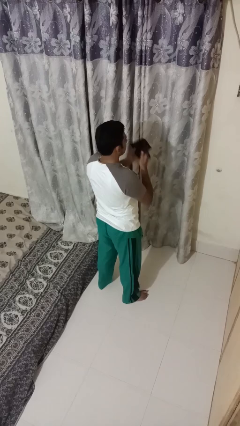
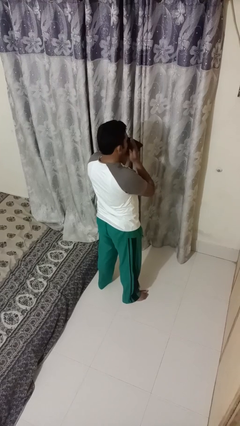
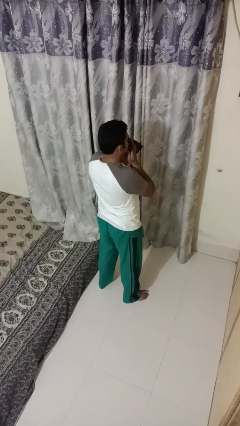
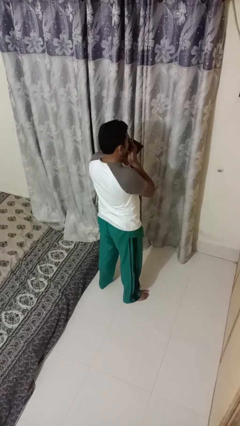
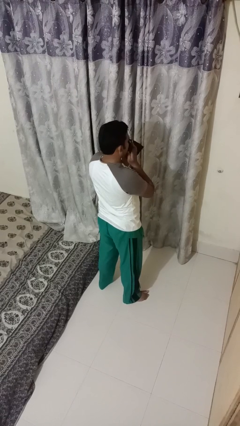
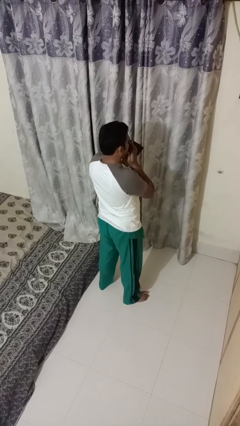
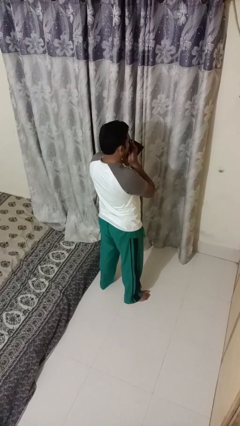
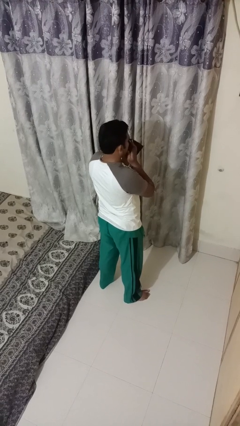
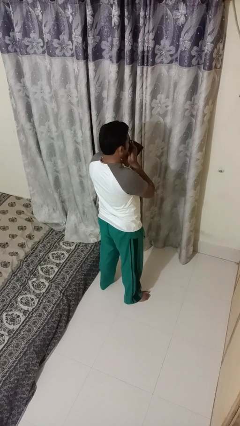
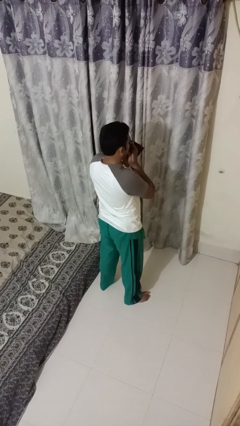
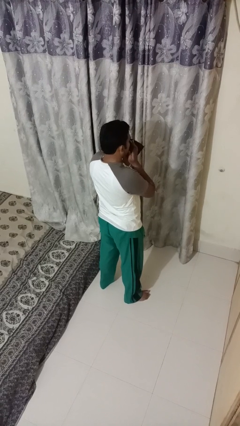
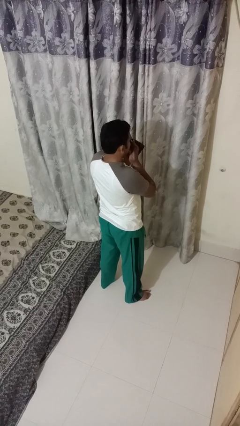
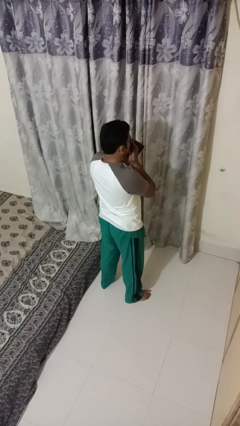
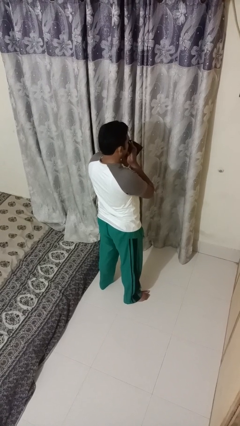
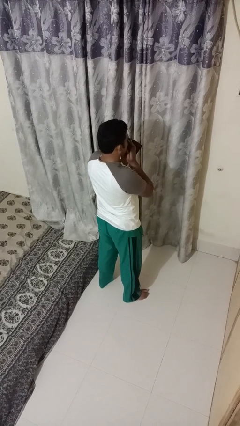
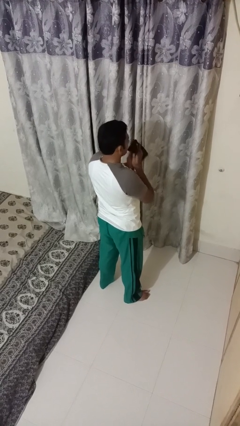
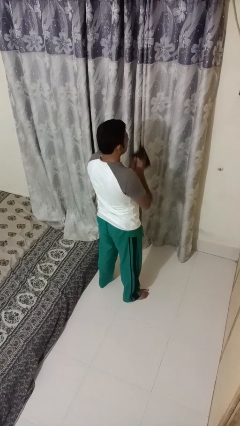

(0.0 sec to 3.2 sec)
person blows nose

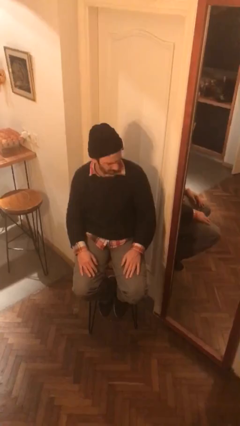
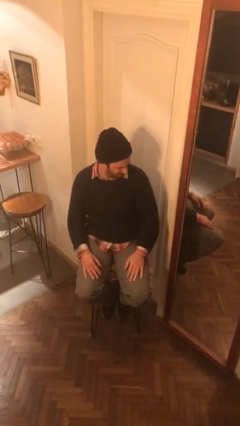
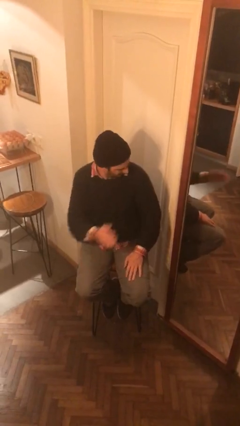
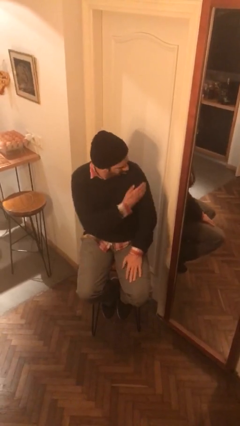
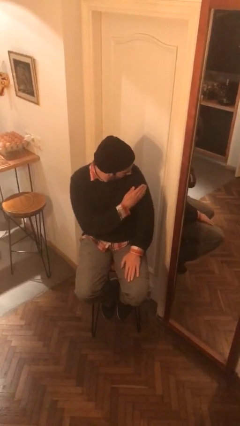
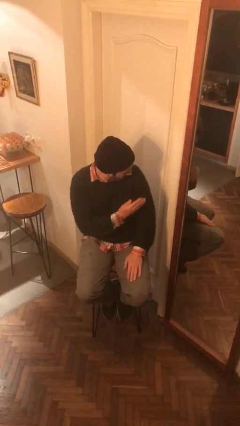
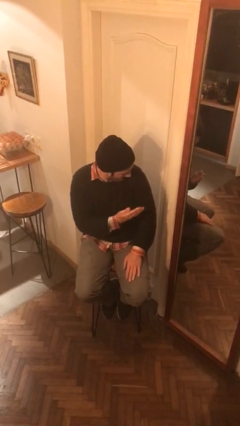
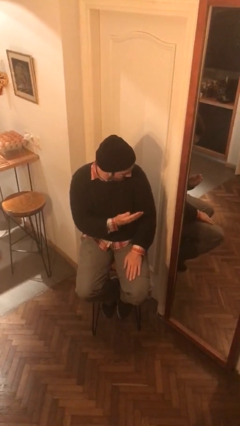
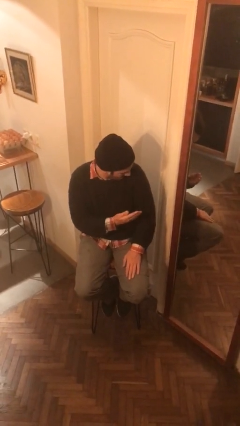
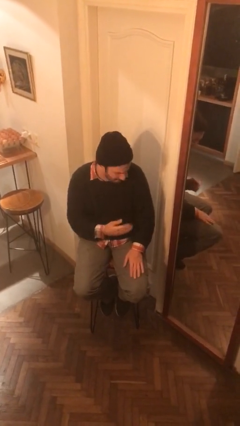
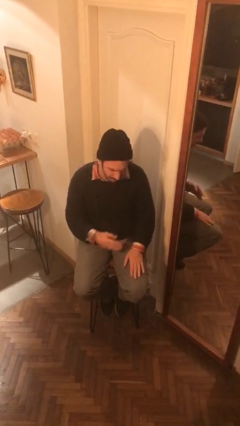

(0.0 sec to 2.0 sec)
person swats bug

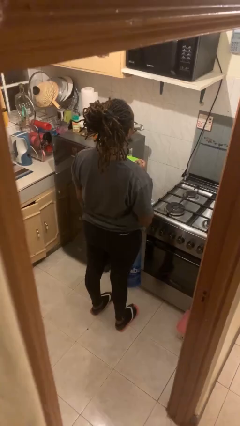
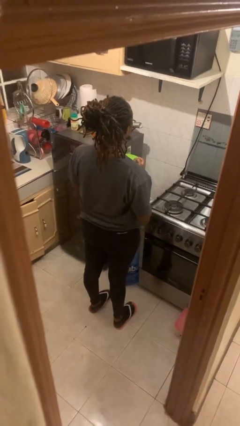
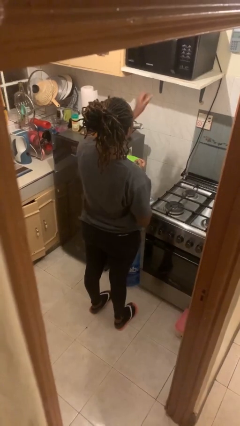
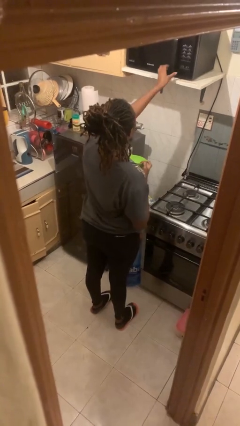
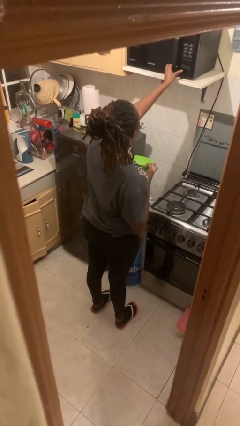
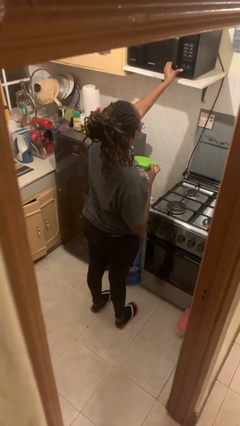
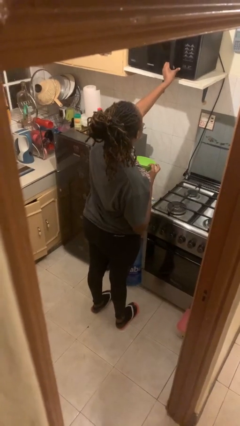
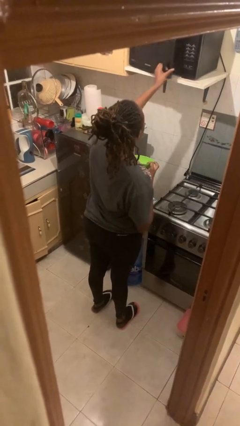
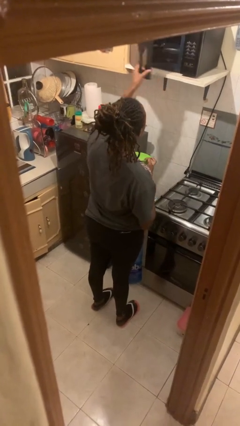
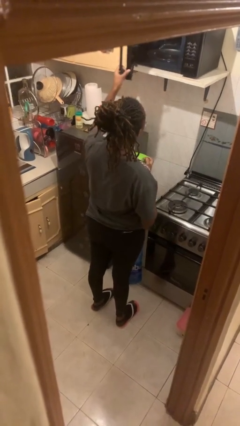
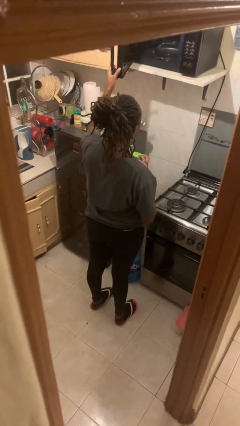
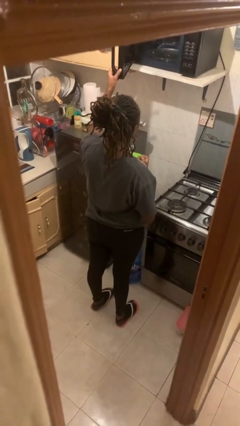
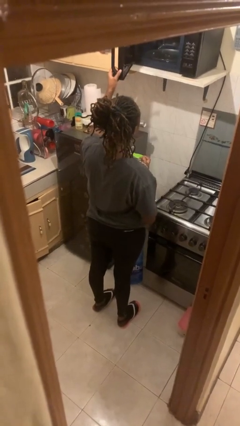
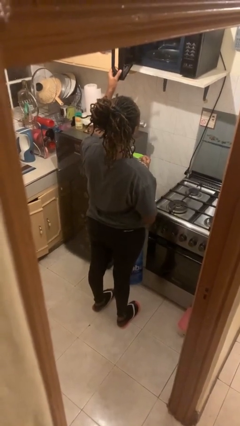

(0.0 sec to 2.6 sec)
person opens microwave

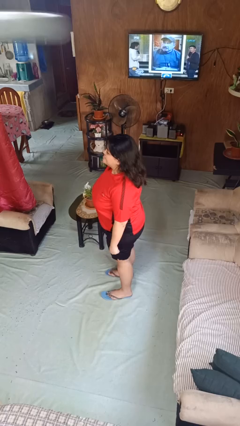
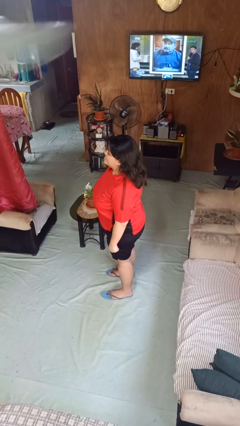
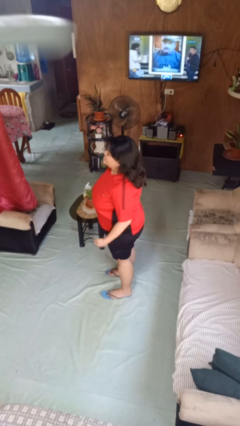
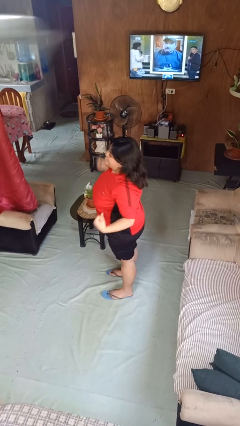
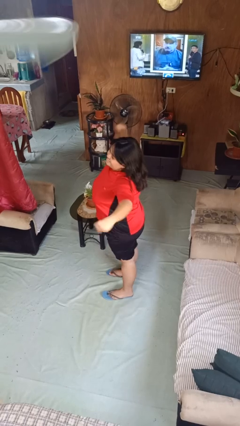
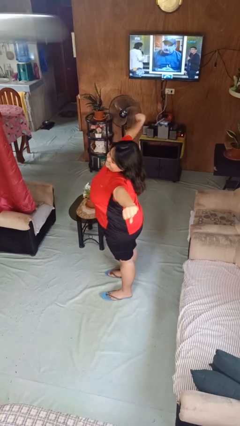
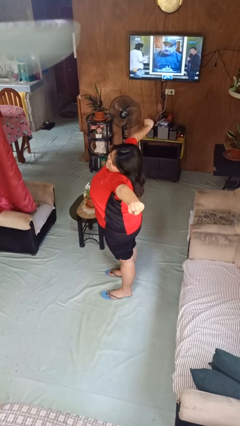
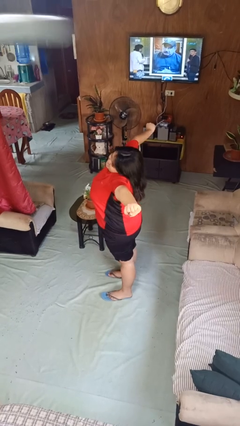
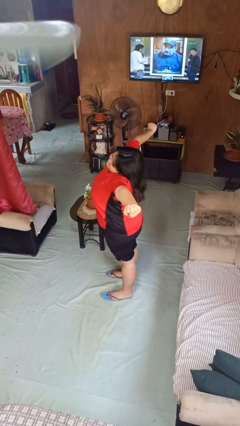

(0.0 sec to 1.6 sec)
person stretches arms to side

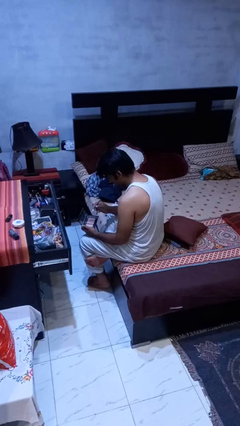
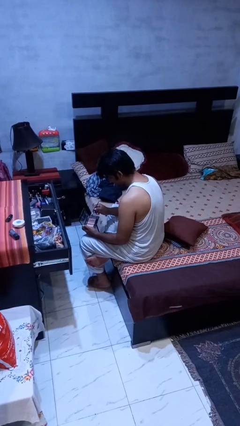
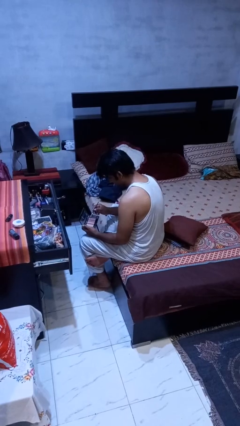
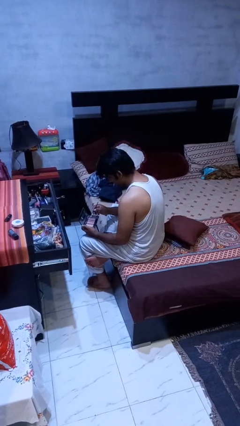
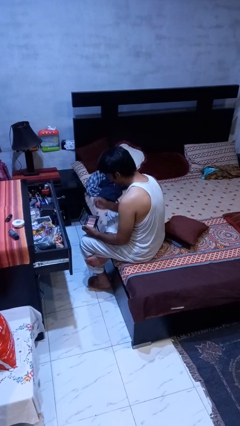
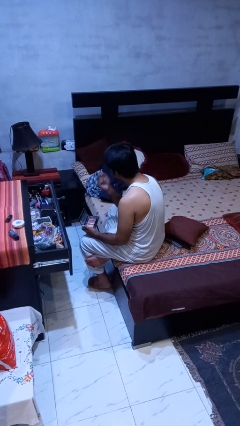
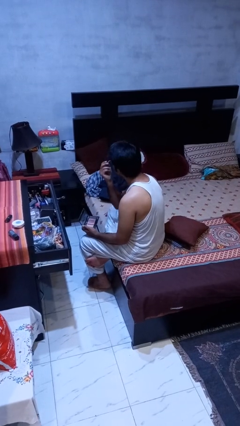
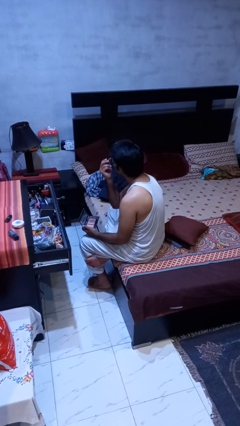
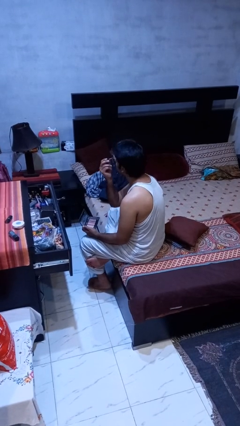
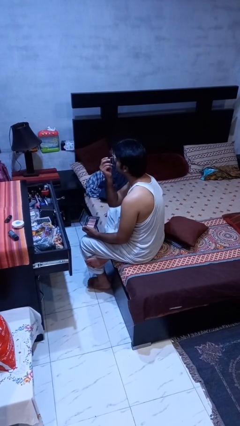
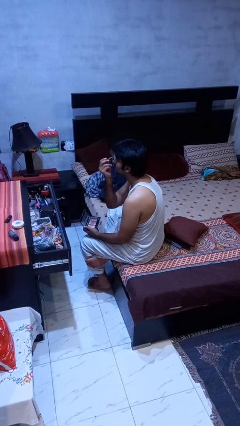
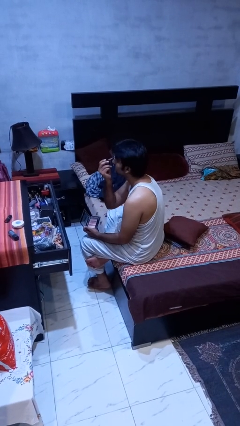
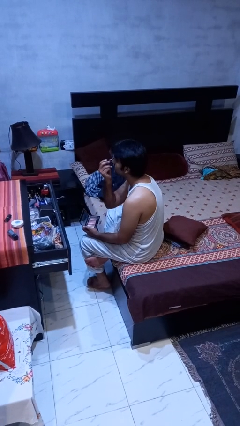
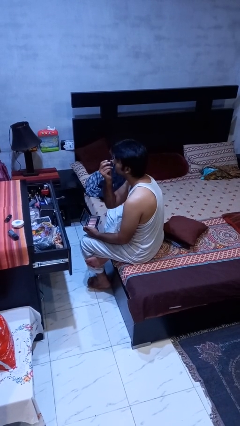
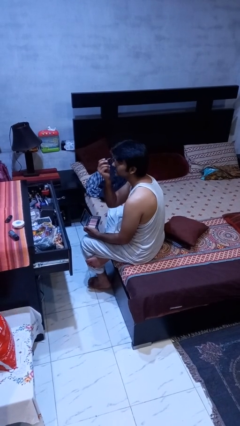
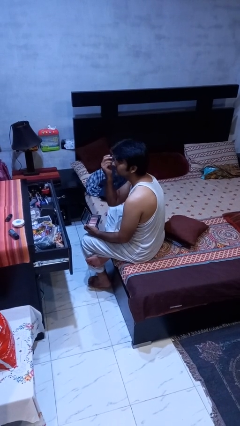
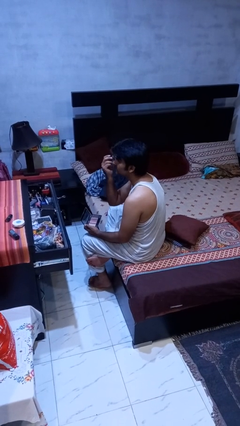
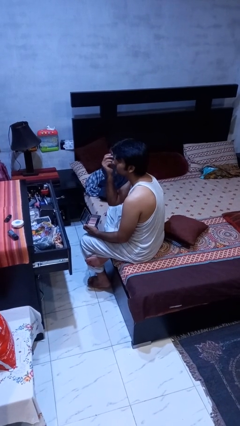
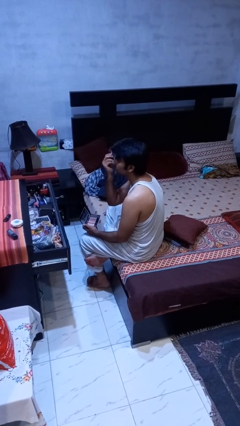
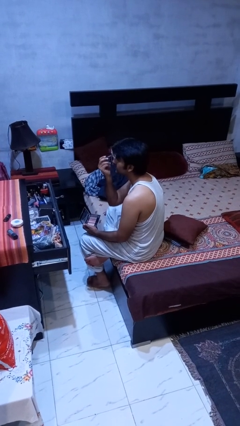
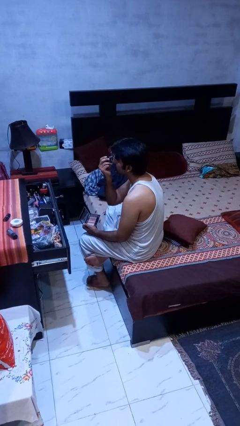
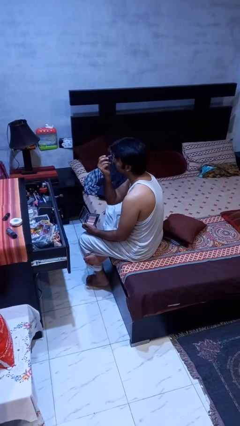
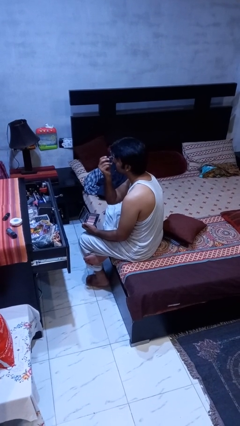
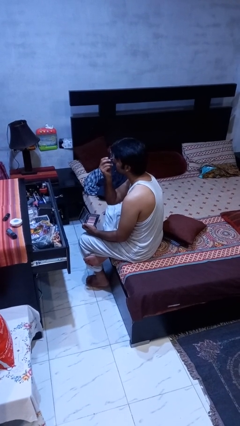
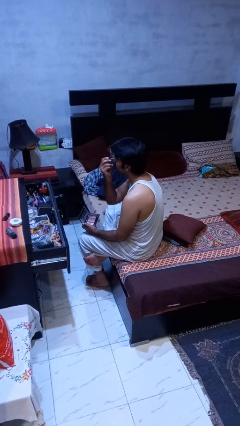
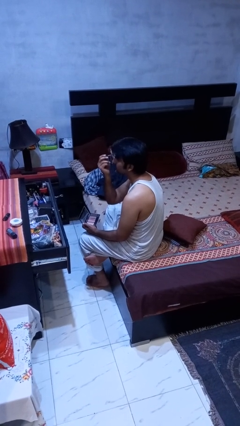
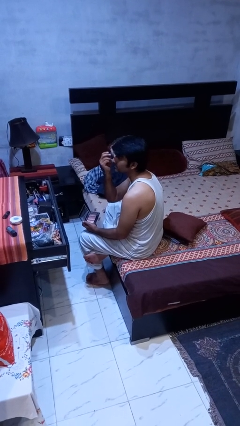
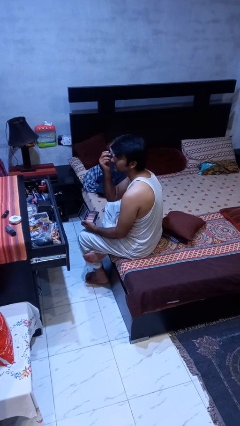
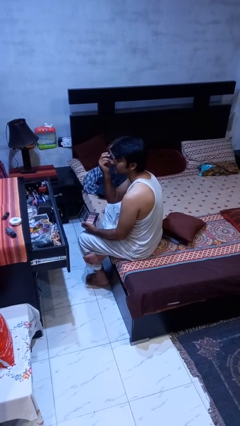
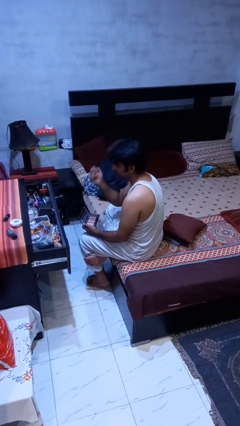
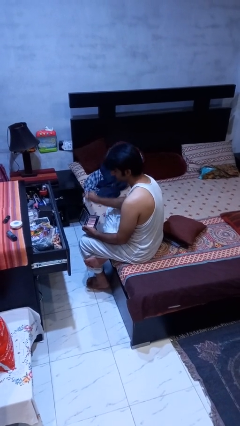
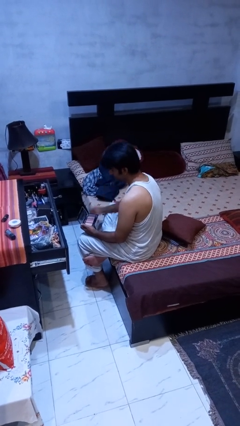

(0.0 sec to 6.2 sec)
person applies eye makeup

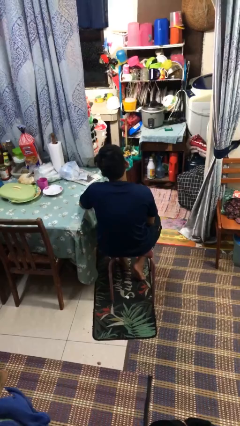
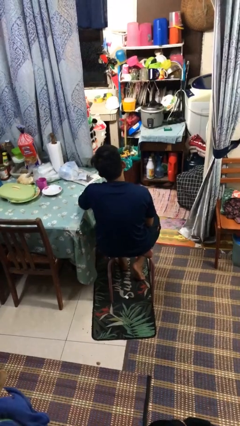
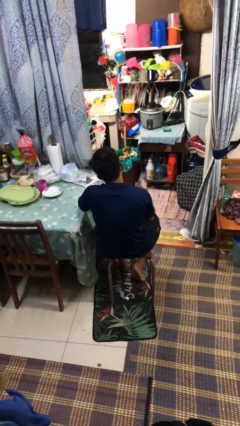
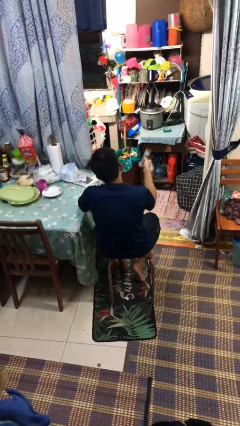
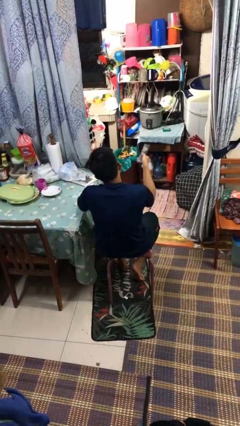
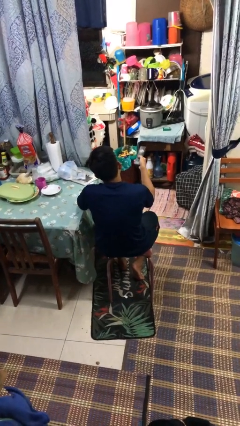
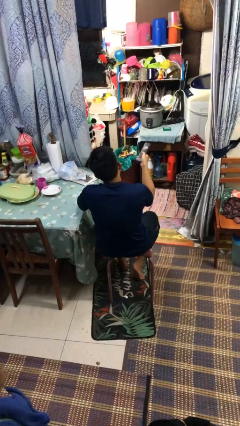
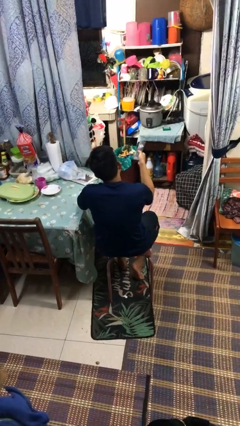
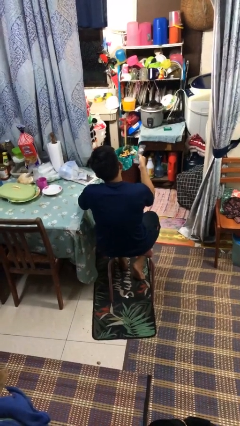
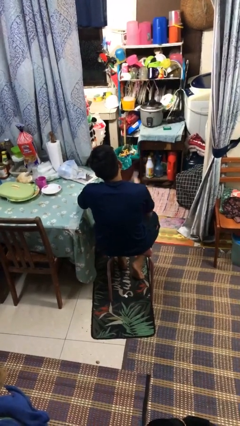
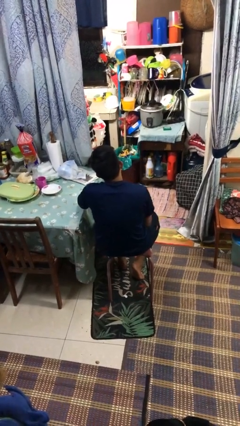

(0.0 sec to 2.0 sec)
person uses television remote

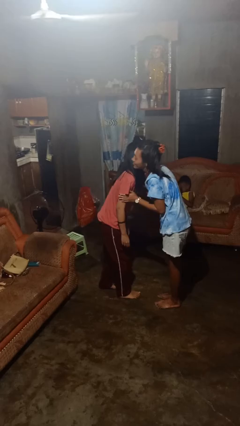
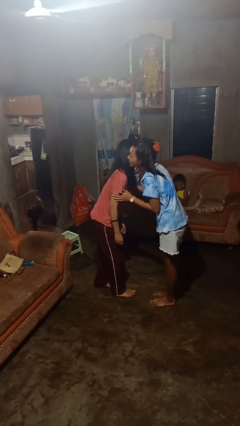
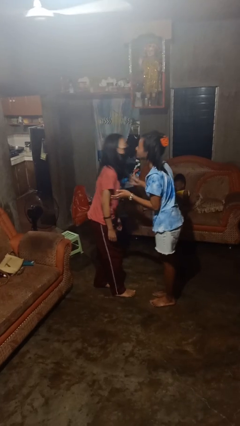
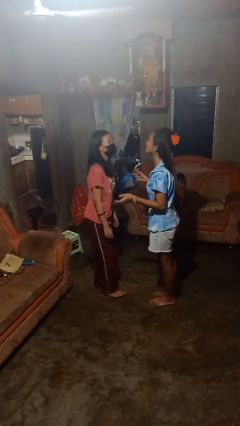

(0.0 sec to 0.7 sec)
person kisses cheek of person
